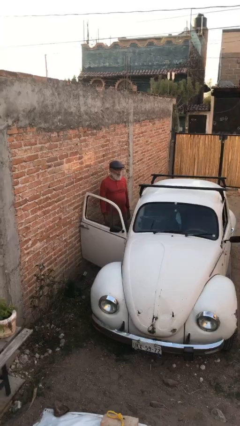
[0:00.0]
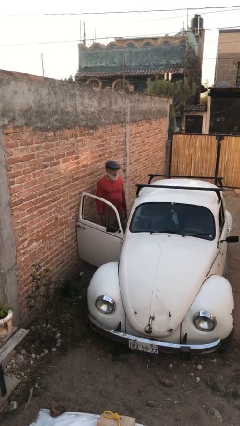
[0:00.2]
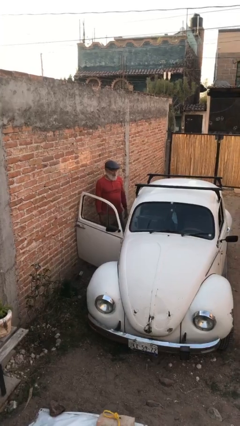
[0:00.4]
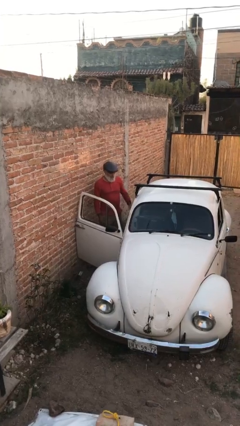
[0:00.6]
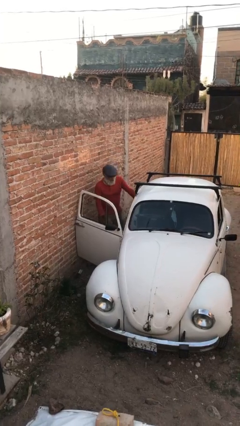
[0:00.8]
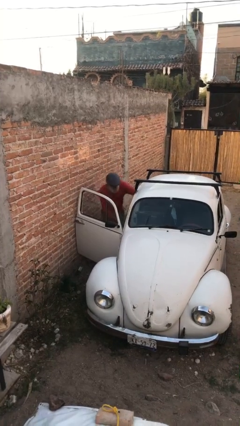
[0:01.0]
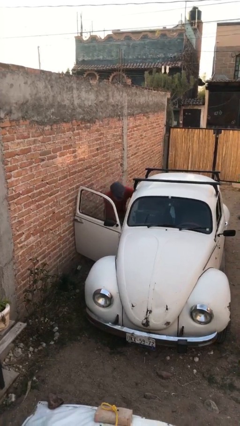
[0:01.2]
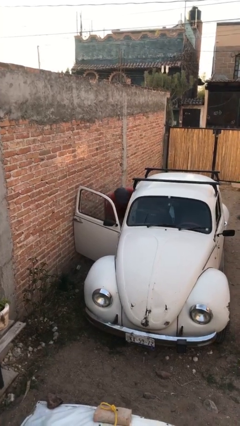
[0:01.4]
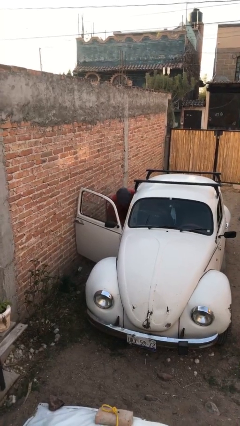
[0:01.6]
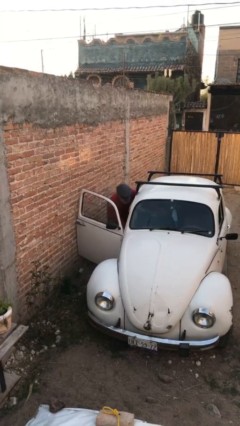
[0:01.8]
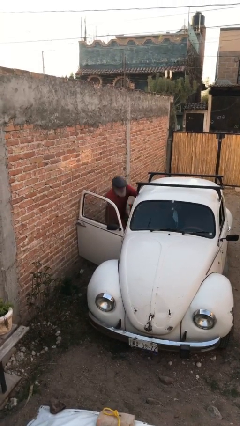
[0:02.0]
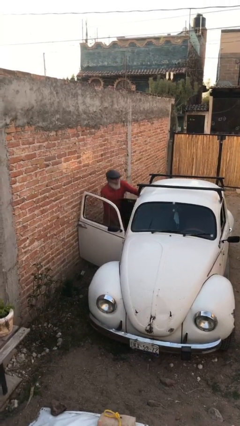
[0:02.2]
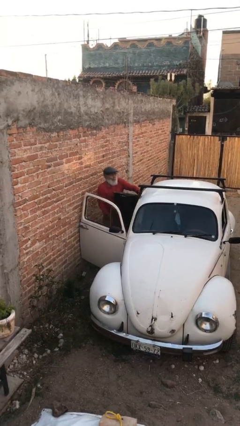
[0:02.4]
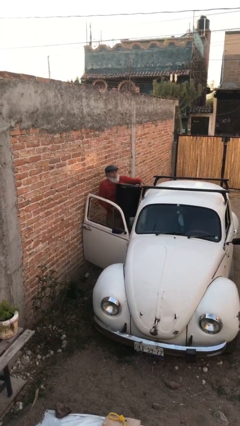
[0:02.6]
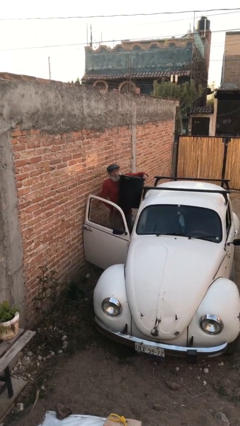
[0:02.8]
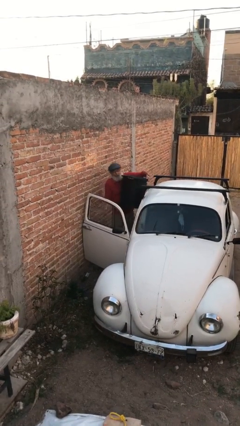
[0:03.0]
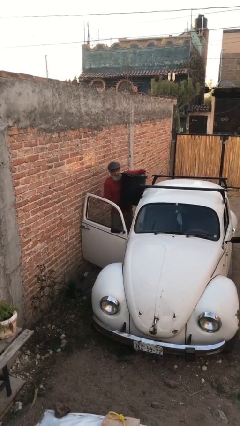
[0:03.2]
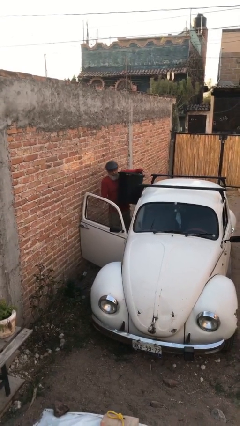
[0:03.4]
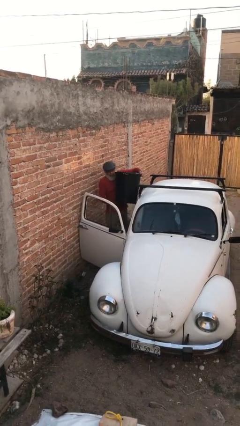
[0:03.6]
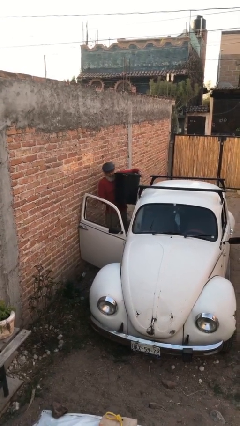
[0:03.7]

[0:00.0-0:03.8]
person unloads car

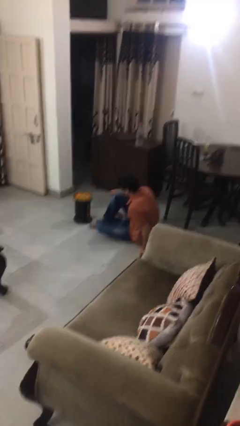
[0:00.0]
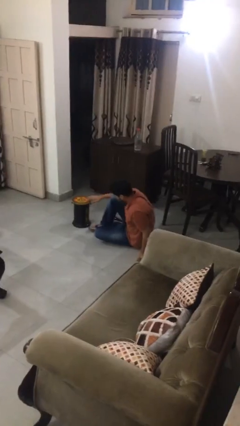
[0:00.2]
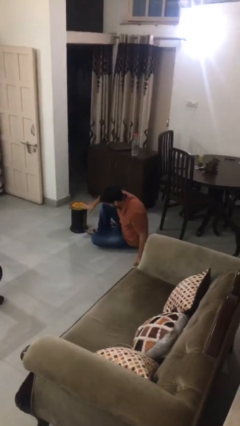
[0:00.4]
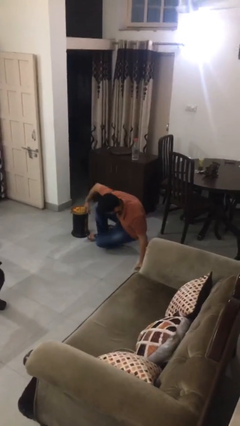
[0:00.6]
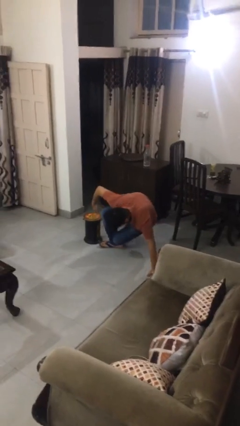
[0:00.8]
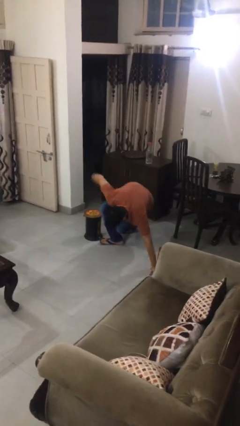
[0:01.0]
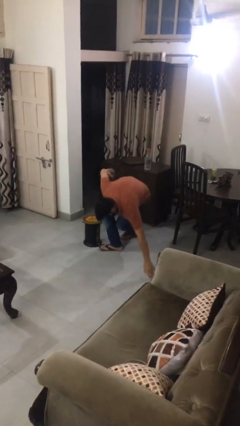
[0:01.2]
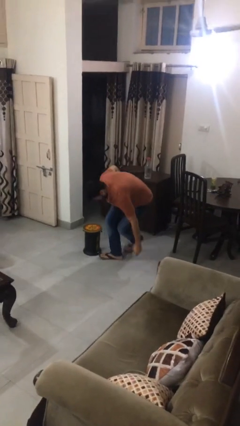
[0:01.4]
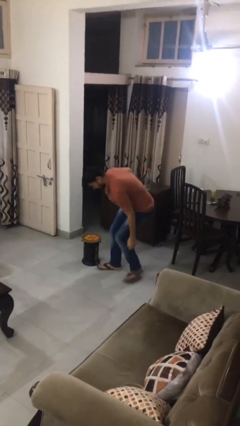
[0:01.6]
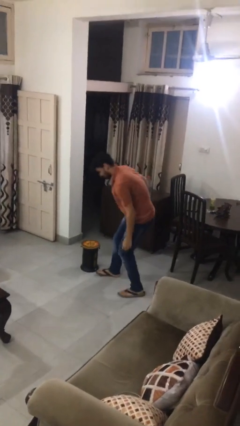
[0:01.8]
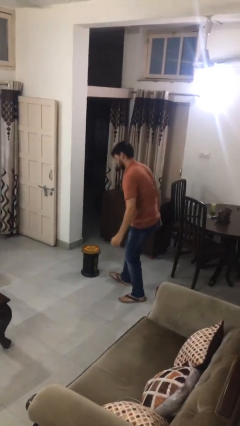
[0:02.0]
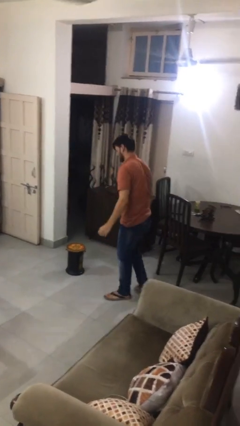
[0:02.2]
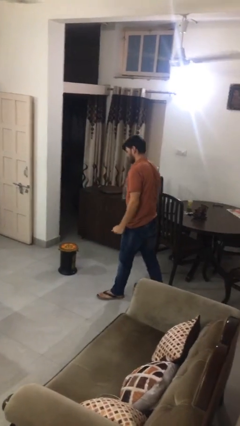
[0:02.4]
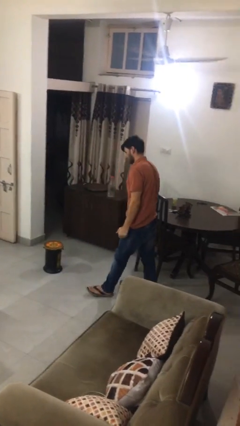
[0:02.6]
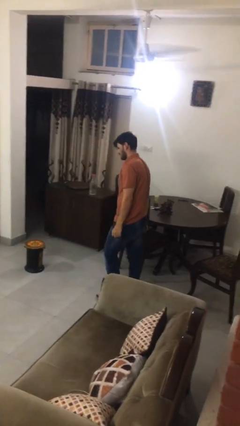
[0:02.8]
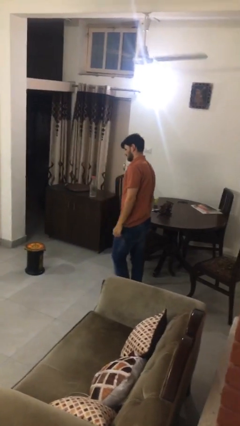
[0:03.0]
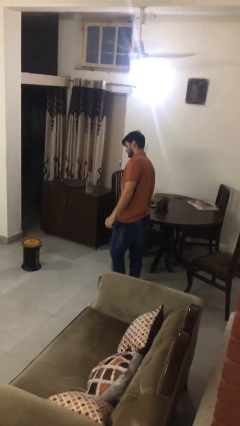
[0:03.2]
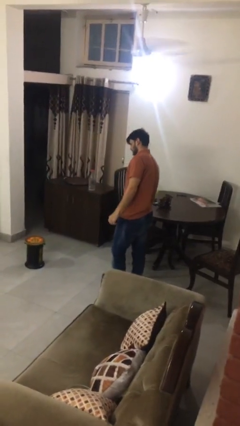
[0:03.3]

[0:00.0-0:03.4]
person stands up from floor

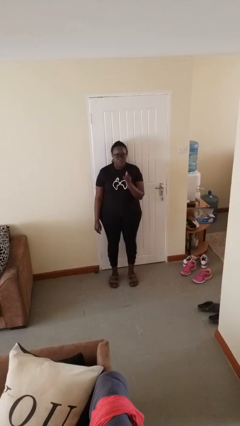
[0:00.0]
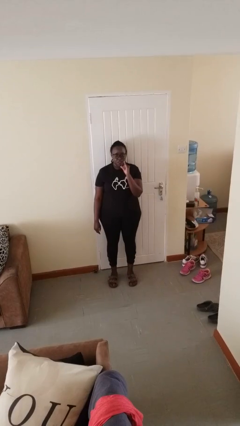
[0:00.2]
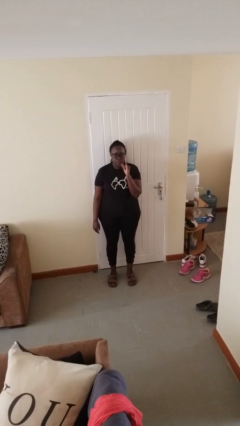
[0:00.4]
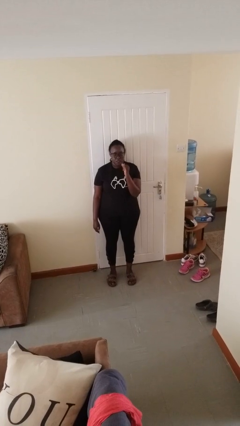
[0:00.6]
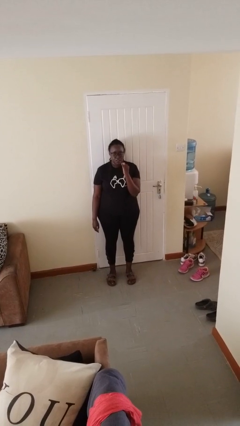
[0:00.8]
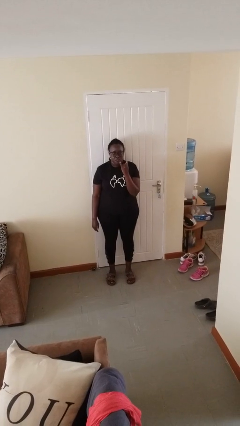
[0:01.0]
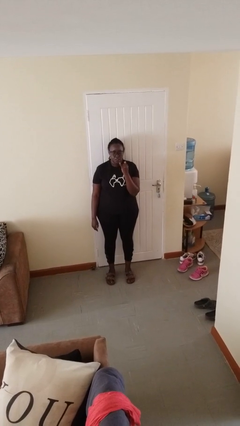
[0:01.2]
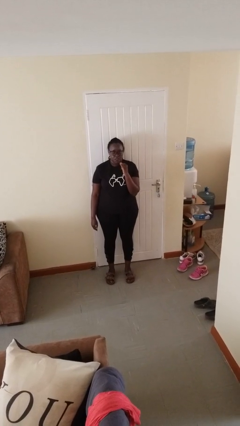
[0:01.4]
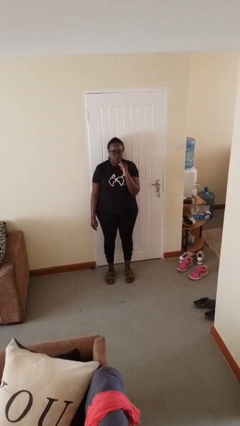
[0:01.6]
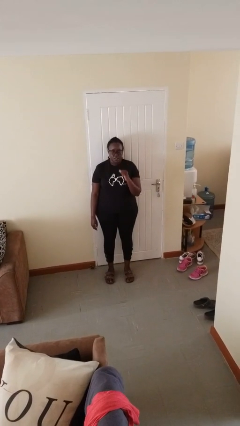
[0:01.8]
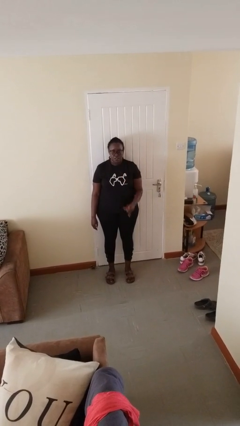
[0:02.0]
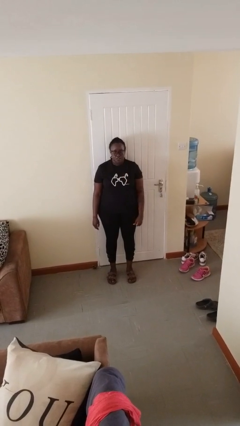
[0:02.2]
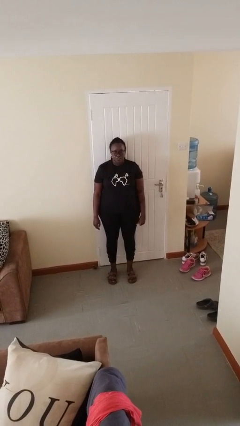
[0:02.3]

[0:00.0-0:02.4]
person gestures hang loose

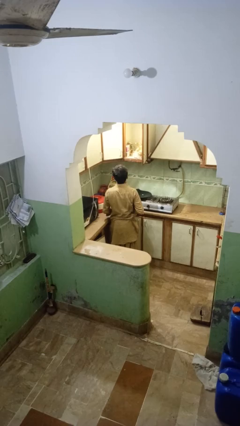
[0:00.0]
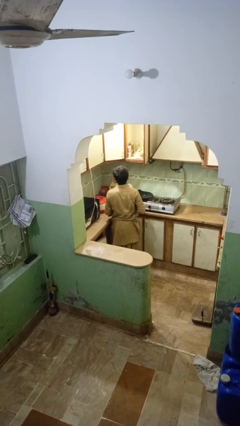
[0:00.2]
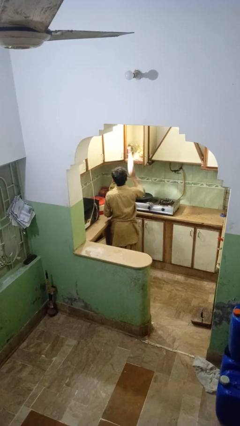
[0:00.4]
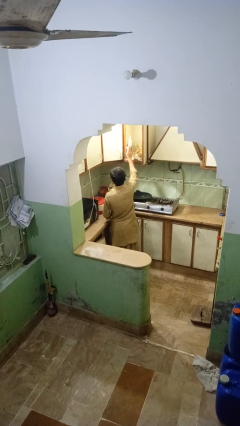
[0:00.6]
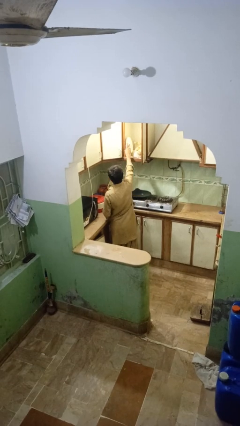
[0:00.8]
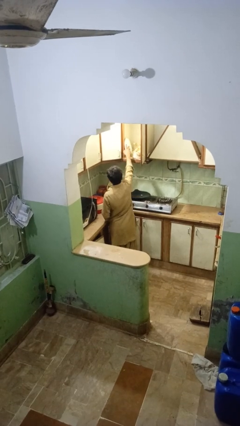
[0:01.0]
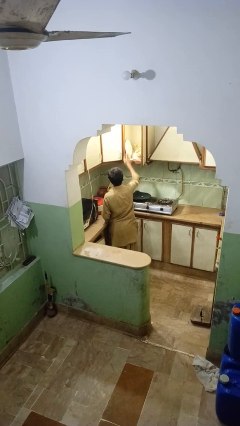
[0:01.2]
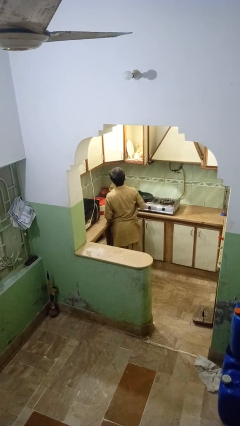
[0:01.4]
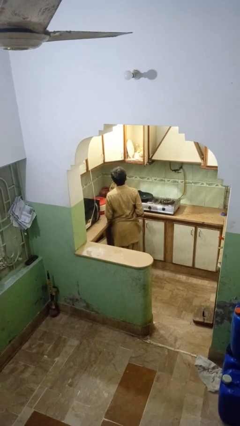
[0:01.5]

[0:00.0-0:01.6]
person puts object in cabinet

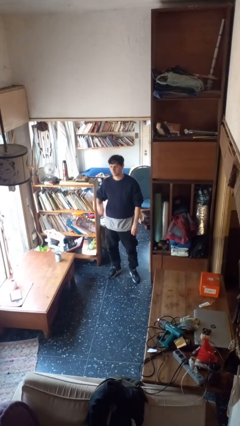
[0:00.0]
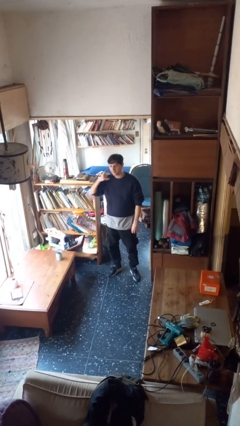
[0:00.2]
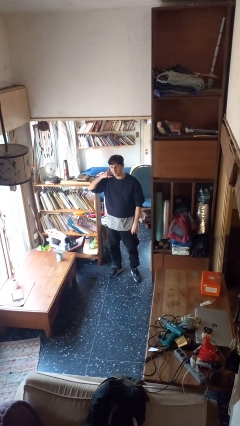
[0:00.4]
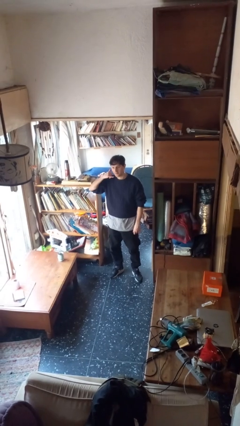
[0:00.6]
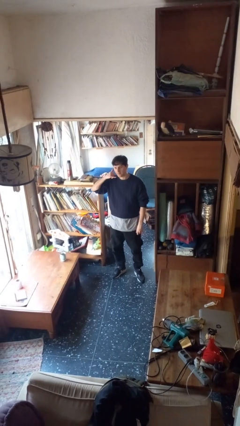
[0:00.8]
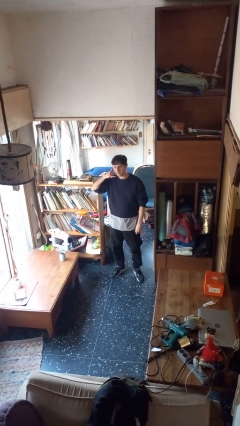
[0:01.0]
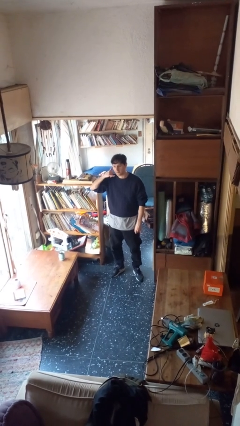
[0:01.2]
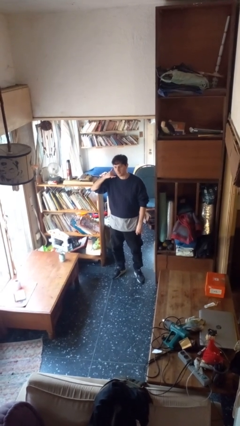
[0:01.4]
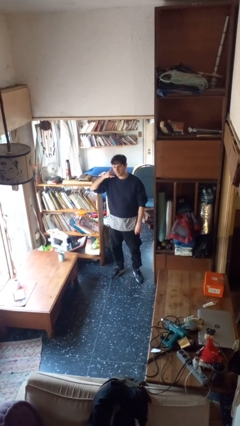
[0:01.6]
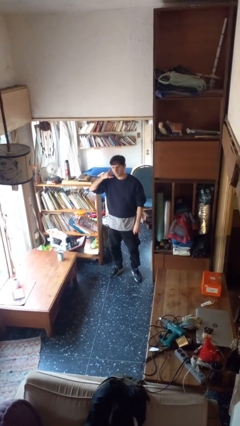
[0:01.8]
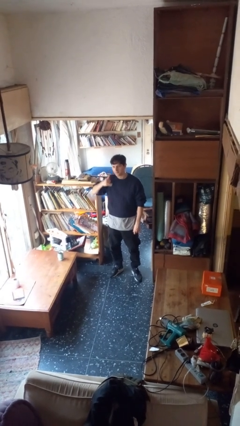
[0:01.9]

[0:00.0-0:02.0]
person gestures call me

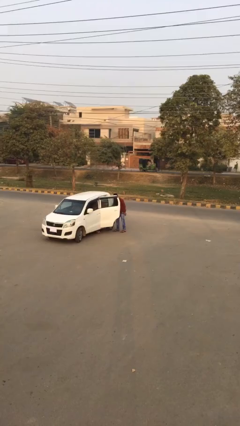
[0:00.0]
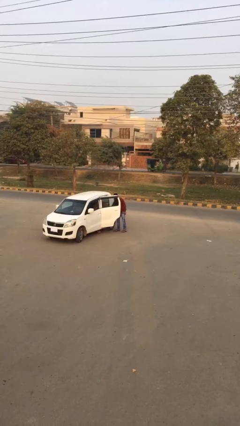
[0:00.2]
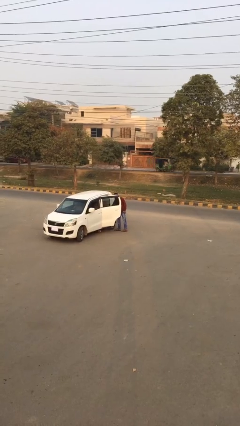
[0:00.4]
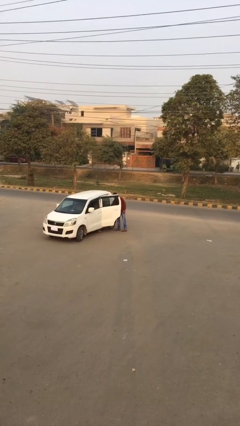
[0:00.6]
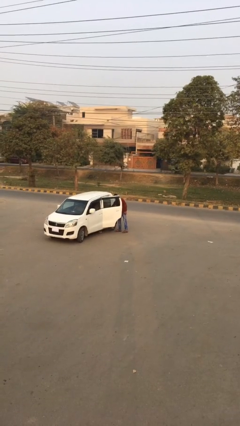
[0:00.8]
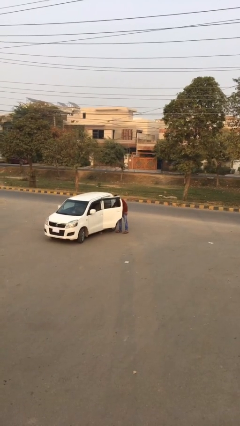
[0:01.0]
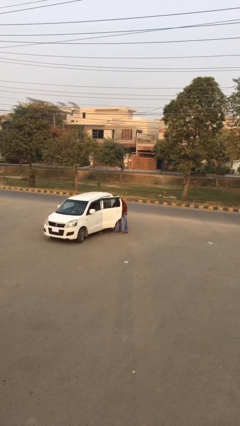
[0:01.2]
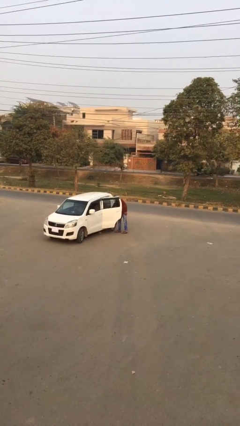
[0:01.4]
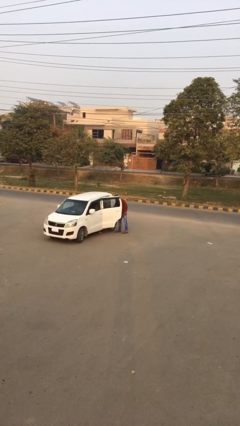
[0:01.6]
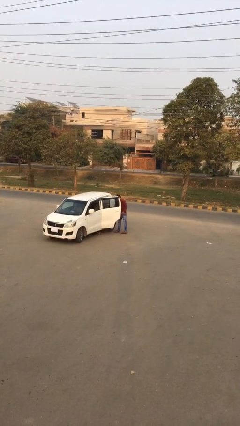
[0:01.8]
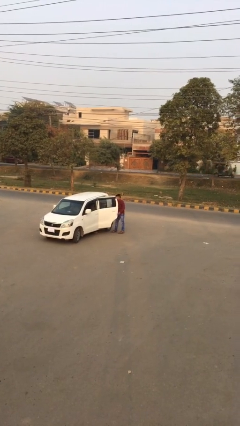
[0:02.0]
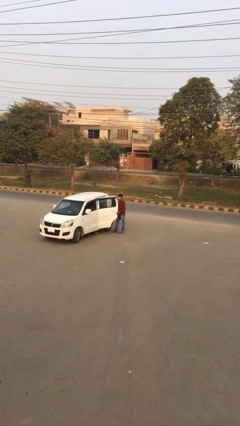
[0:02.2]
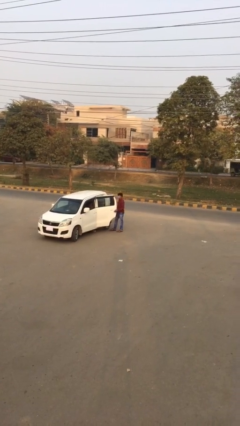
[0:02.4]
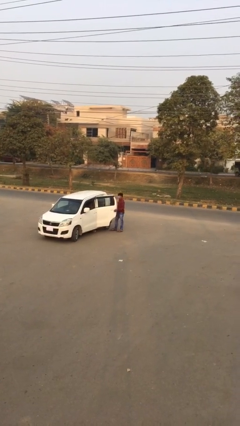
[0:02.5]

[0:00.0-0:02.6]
person loads car
